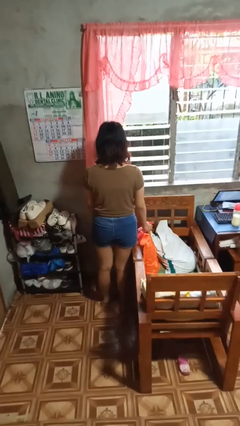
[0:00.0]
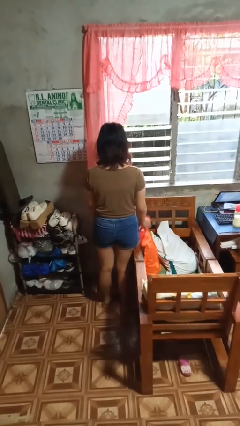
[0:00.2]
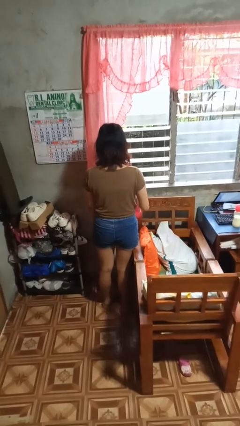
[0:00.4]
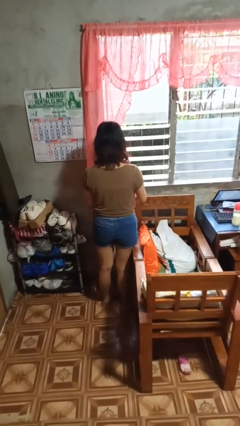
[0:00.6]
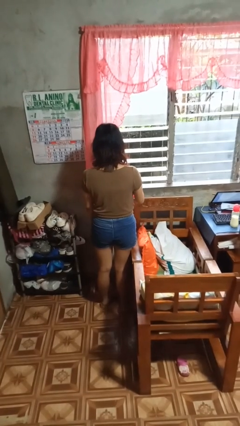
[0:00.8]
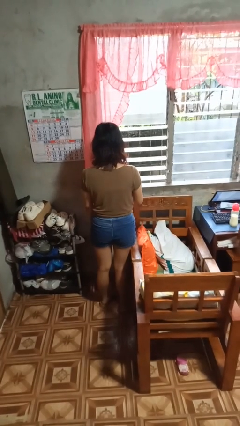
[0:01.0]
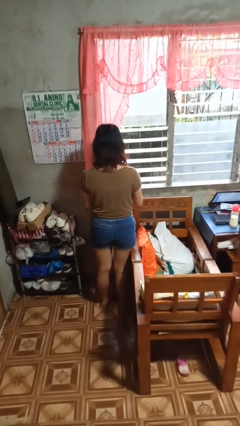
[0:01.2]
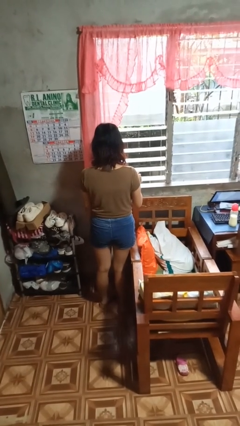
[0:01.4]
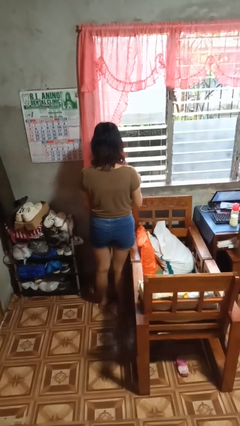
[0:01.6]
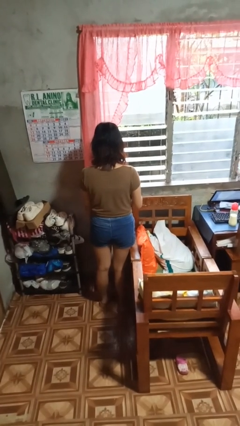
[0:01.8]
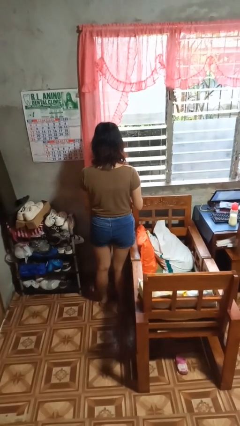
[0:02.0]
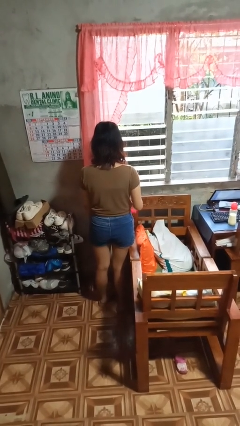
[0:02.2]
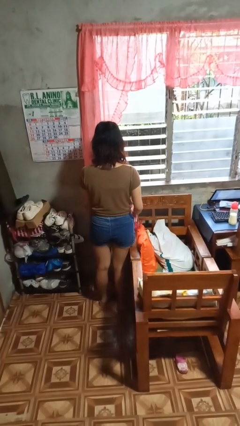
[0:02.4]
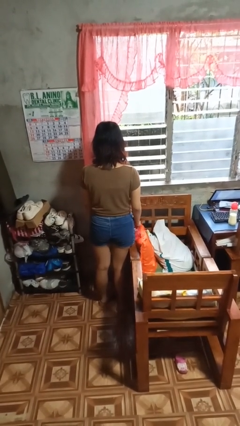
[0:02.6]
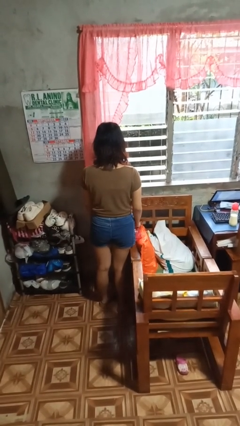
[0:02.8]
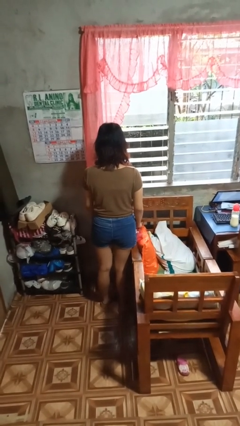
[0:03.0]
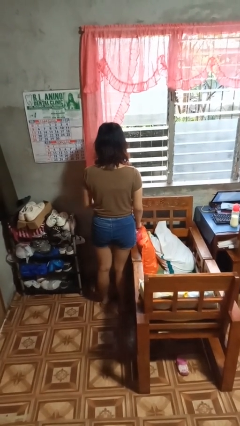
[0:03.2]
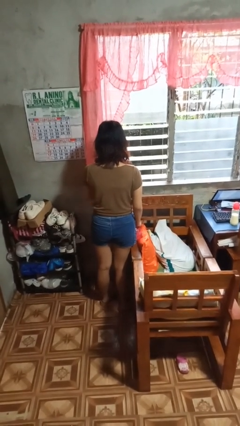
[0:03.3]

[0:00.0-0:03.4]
person sprays from bottle

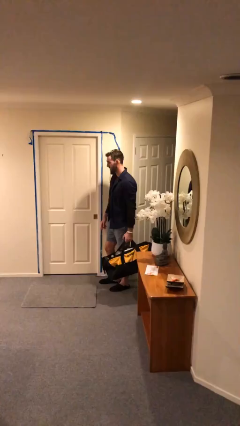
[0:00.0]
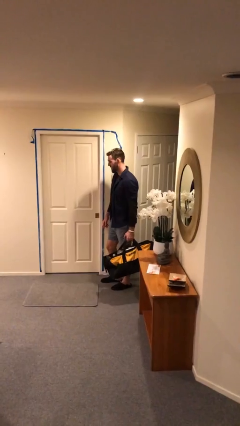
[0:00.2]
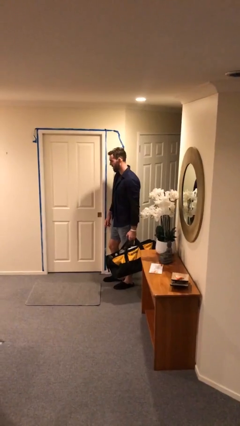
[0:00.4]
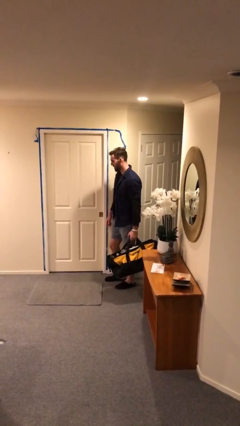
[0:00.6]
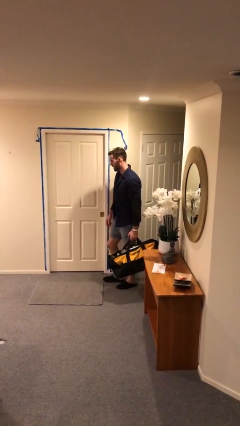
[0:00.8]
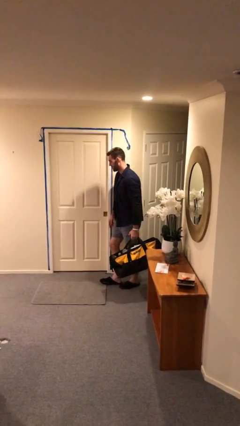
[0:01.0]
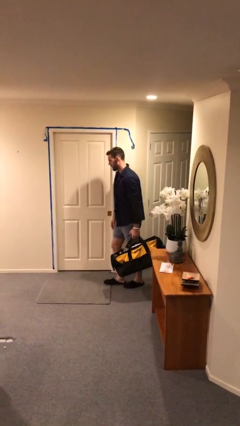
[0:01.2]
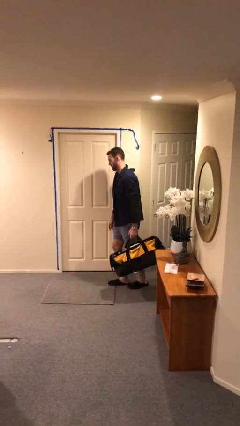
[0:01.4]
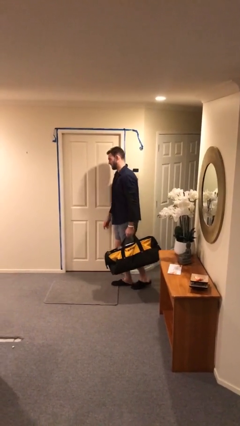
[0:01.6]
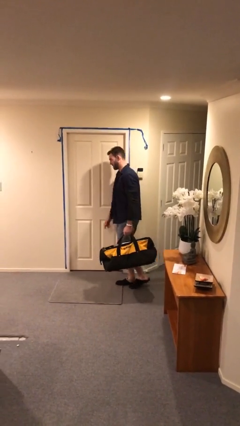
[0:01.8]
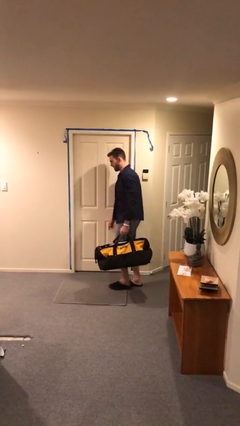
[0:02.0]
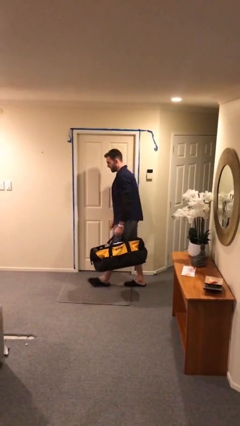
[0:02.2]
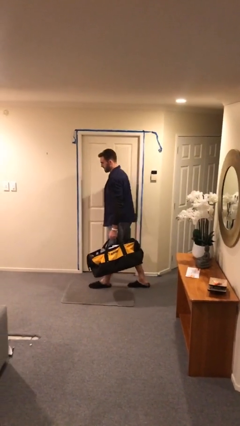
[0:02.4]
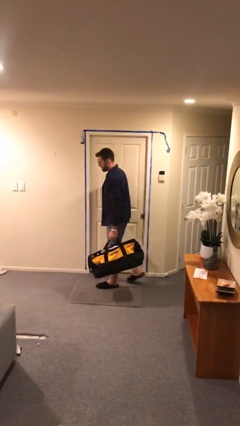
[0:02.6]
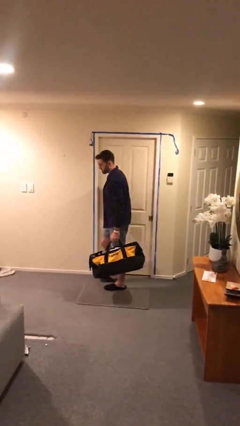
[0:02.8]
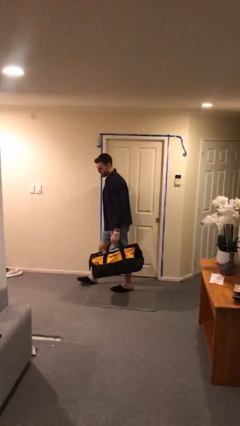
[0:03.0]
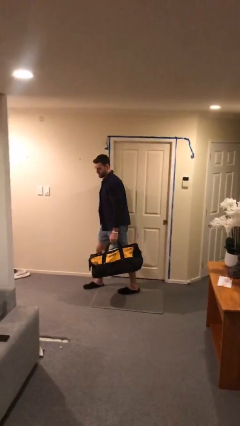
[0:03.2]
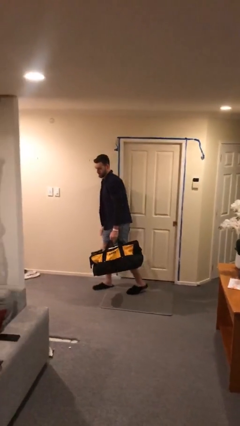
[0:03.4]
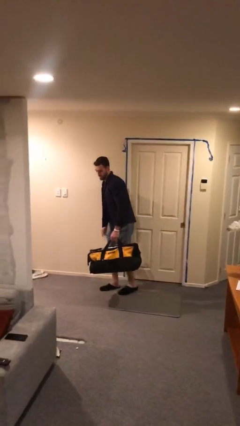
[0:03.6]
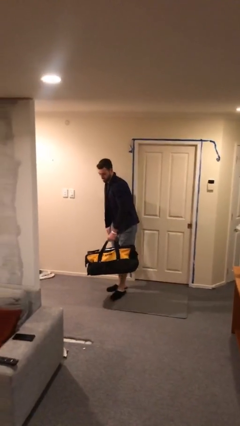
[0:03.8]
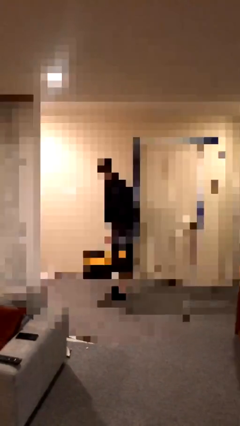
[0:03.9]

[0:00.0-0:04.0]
person carries heavy object

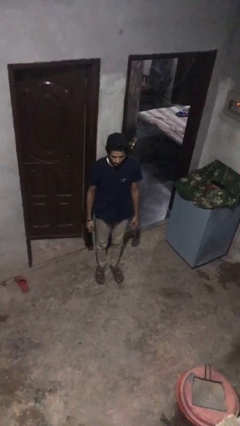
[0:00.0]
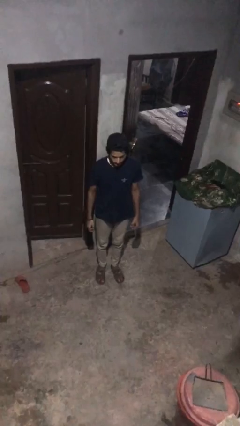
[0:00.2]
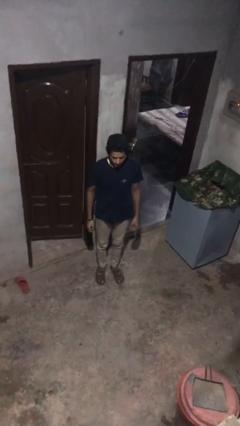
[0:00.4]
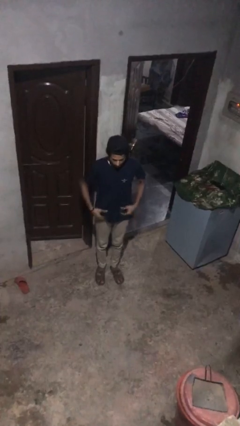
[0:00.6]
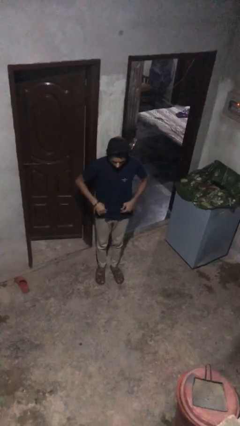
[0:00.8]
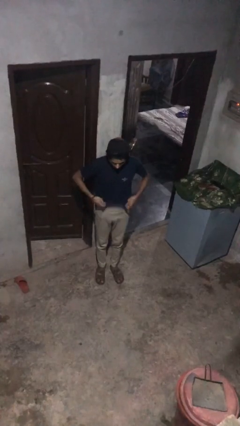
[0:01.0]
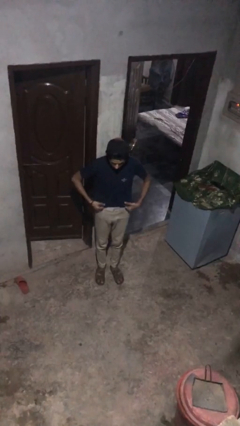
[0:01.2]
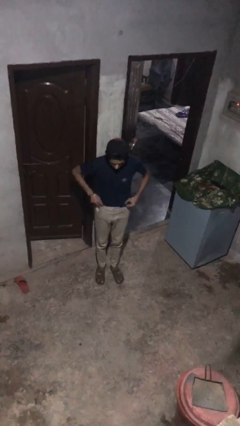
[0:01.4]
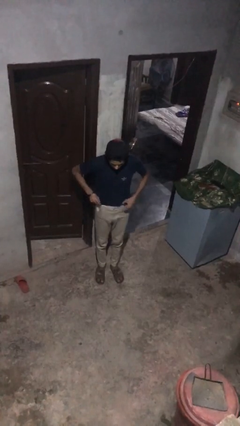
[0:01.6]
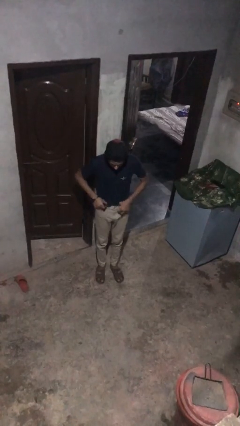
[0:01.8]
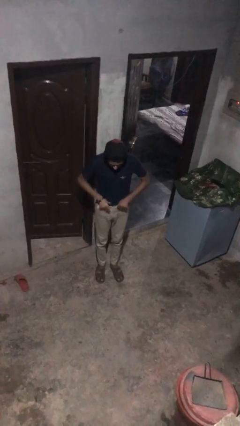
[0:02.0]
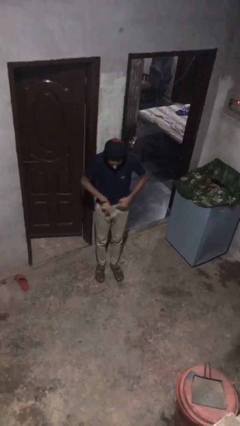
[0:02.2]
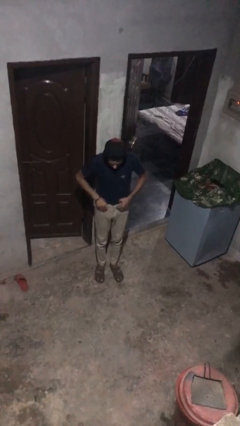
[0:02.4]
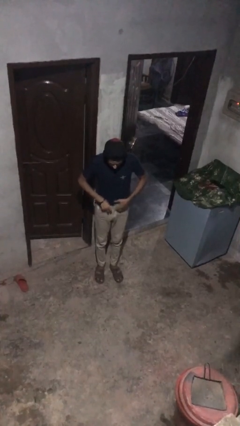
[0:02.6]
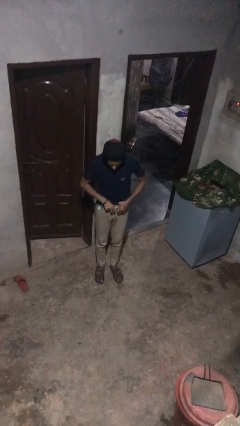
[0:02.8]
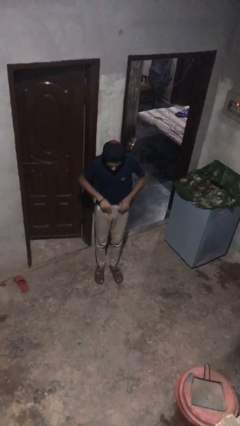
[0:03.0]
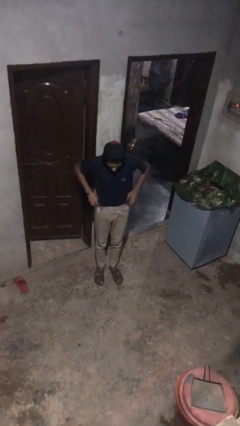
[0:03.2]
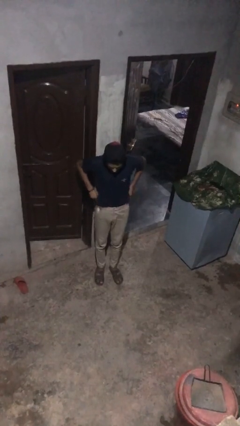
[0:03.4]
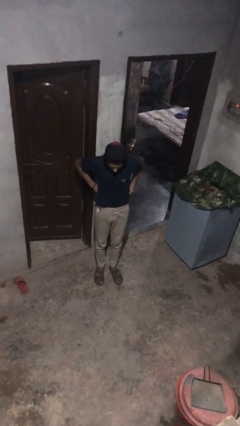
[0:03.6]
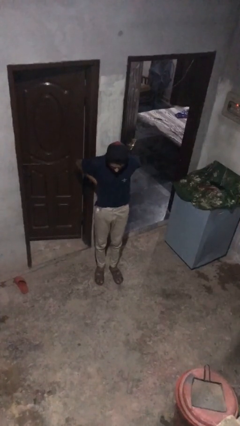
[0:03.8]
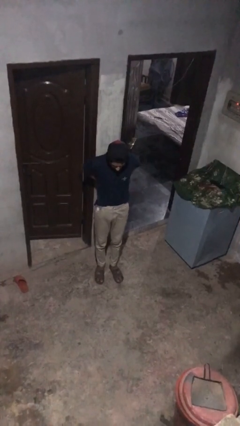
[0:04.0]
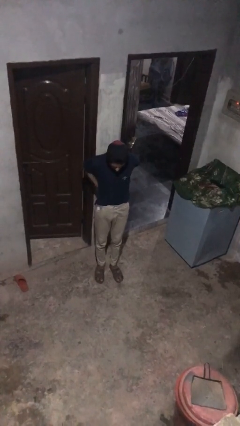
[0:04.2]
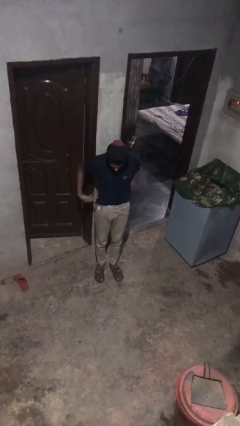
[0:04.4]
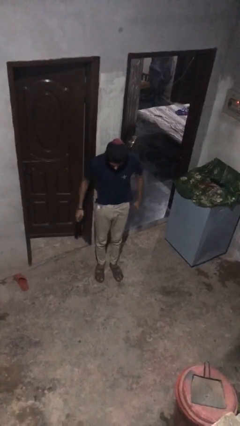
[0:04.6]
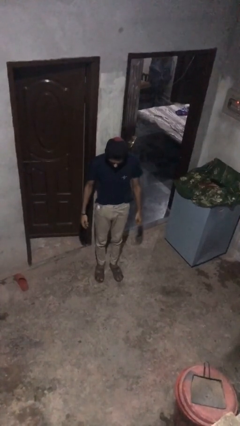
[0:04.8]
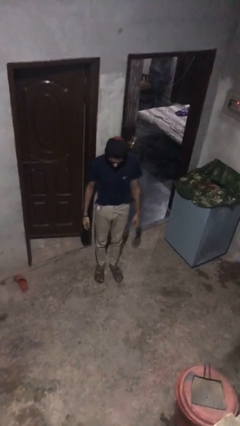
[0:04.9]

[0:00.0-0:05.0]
person tucks in shirt

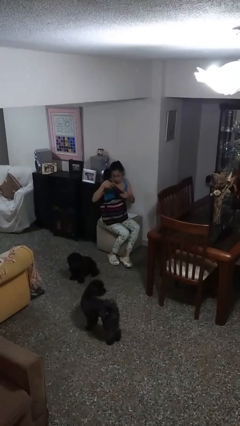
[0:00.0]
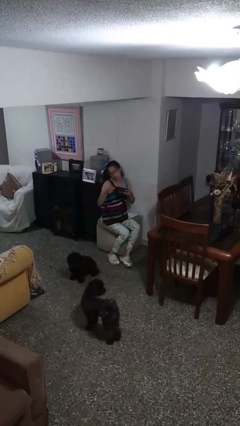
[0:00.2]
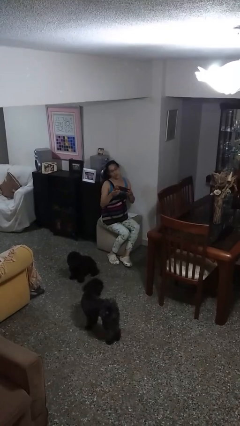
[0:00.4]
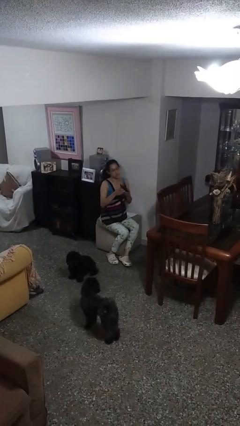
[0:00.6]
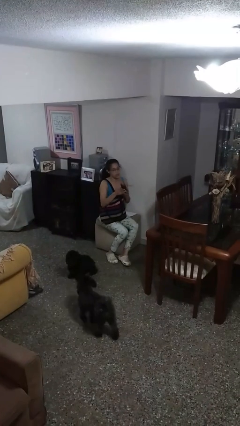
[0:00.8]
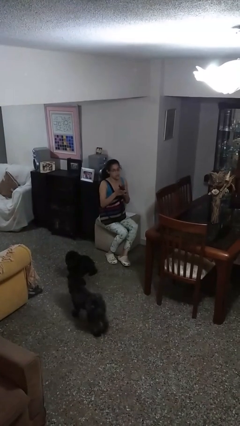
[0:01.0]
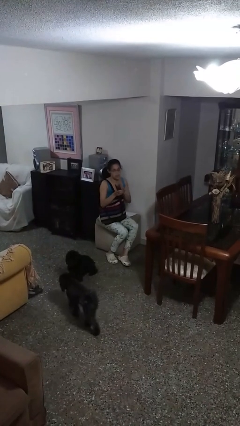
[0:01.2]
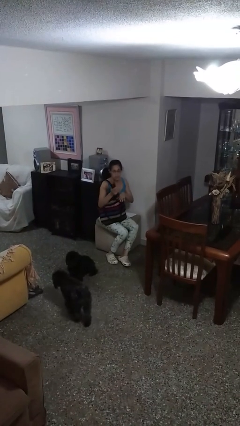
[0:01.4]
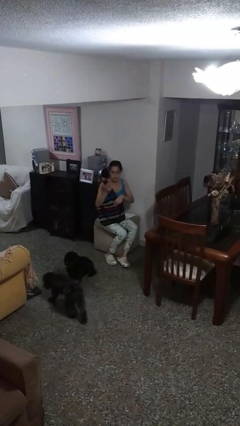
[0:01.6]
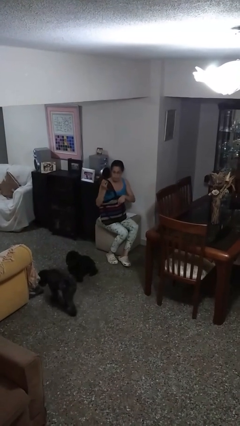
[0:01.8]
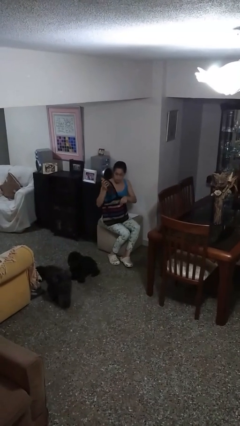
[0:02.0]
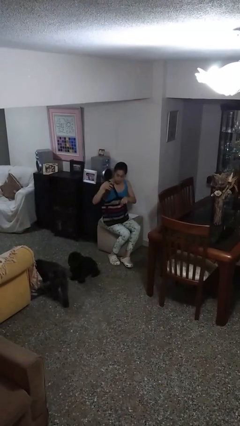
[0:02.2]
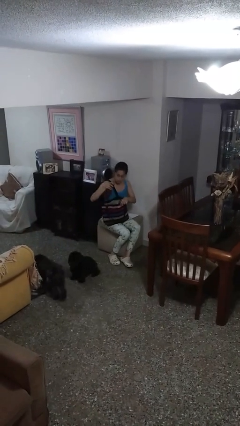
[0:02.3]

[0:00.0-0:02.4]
person takes object from purse

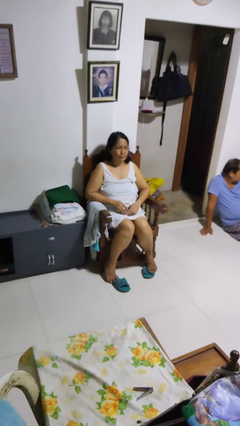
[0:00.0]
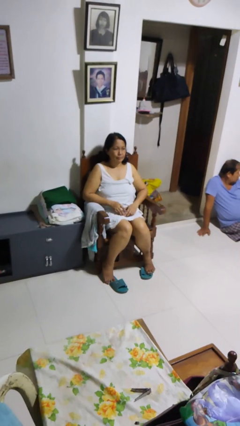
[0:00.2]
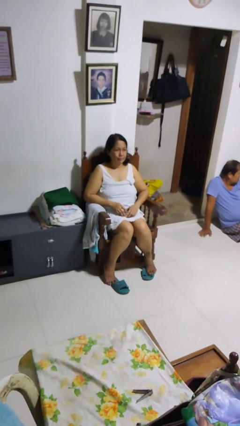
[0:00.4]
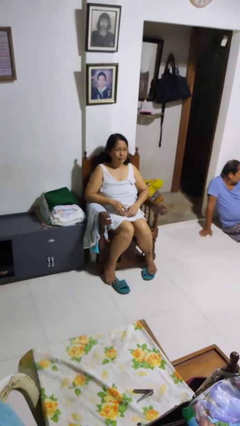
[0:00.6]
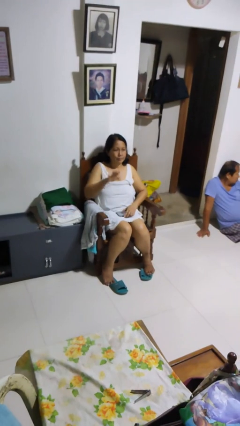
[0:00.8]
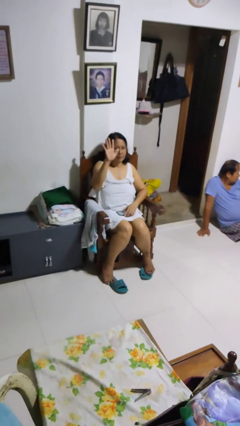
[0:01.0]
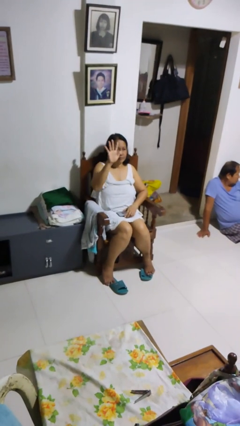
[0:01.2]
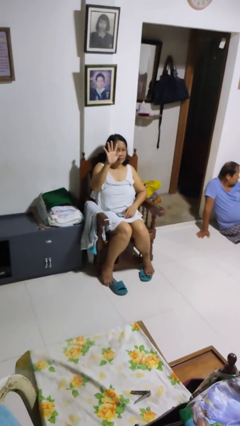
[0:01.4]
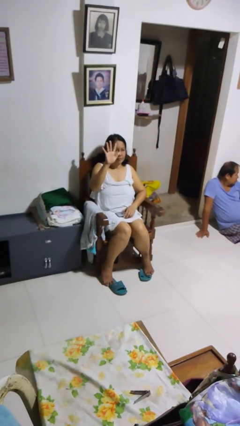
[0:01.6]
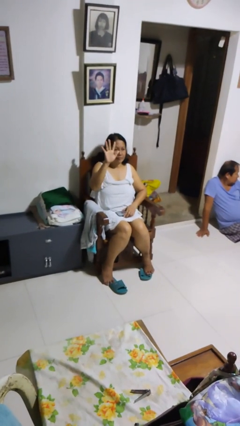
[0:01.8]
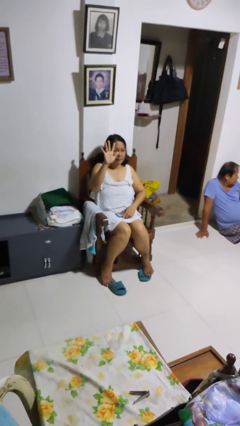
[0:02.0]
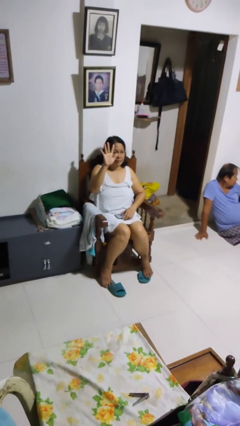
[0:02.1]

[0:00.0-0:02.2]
person gestures number five

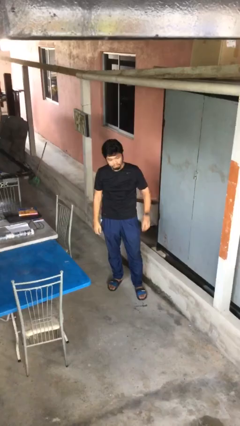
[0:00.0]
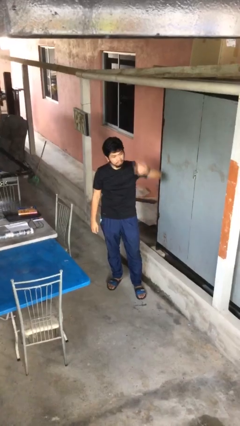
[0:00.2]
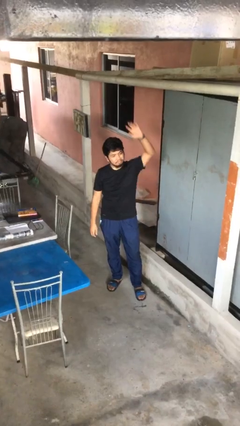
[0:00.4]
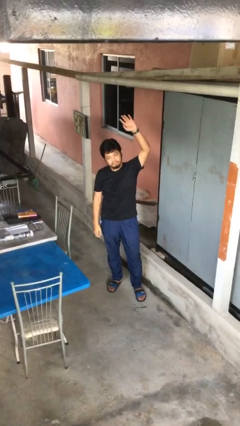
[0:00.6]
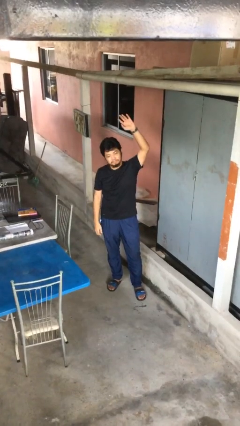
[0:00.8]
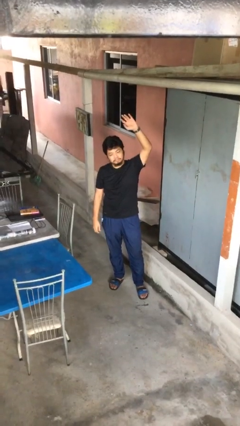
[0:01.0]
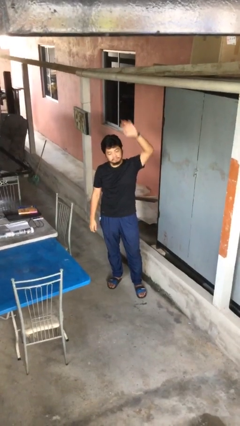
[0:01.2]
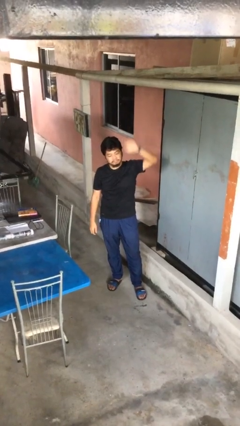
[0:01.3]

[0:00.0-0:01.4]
person gestures raise hand
